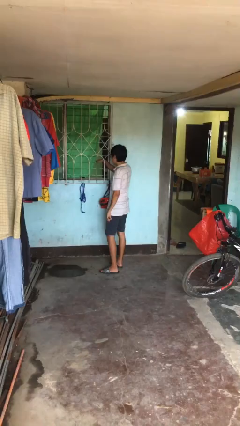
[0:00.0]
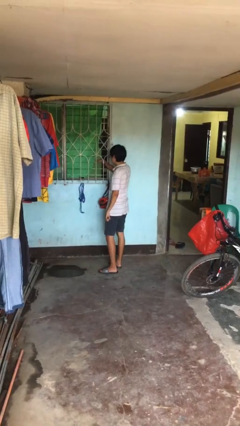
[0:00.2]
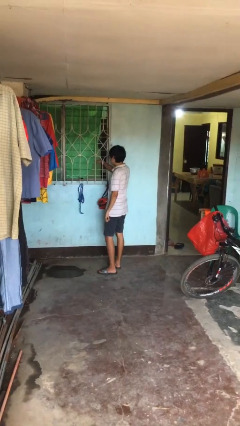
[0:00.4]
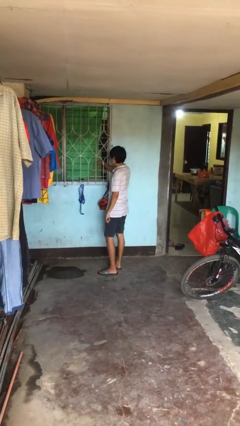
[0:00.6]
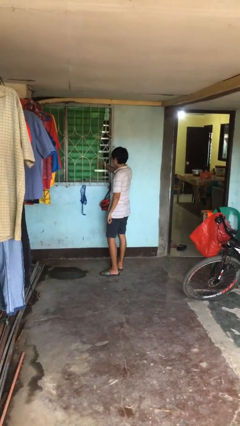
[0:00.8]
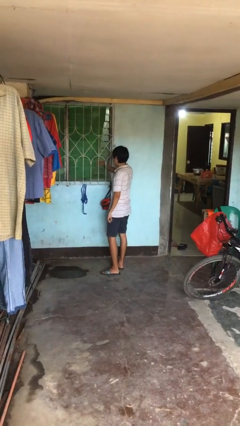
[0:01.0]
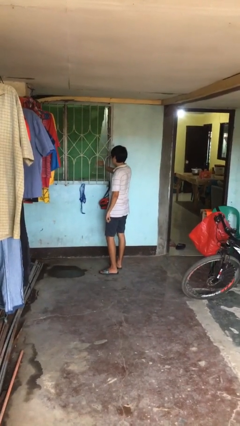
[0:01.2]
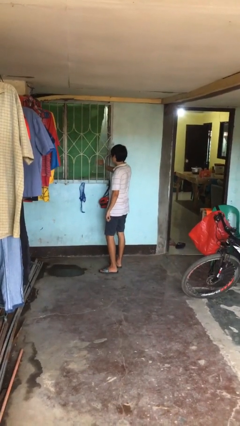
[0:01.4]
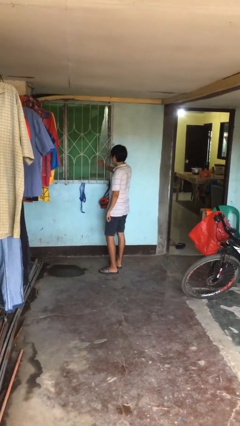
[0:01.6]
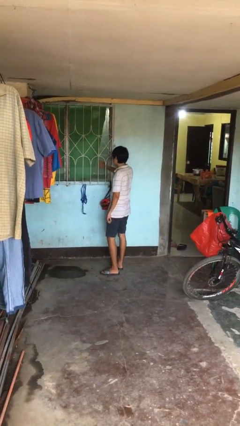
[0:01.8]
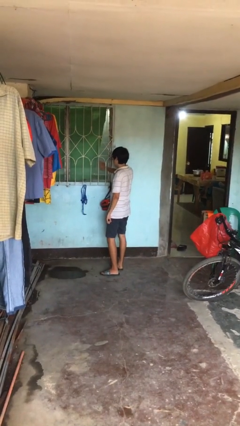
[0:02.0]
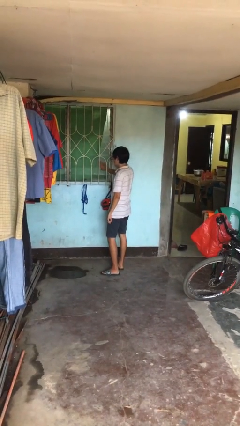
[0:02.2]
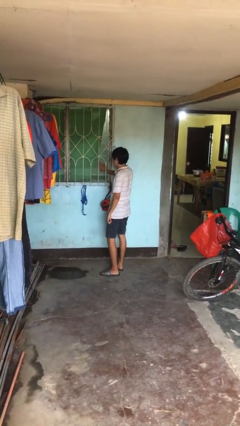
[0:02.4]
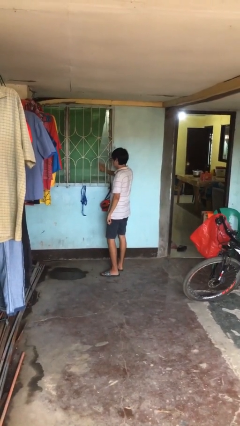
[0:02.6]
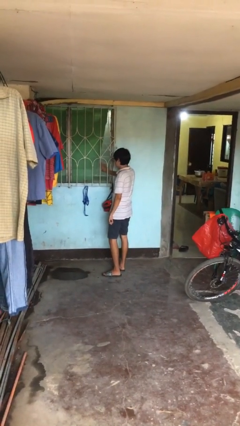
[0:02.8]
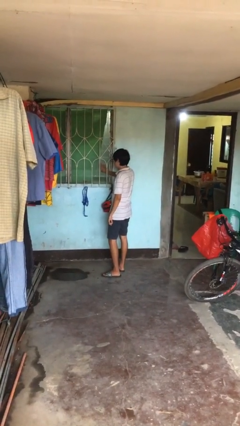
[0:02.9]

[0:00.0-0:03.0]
person closes home window

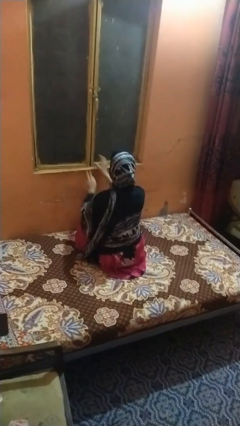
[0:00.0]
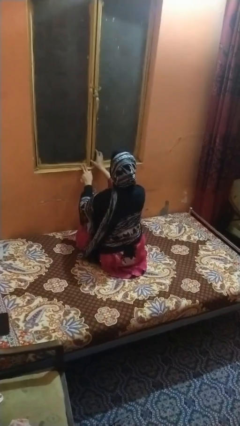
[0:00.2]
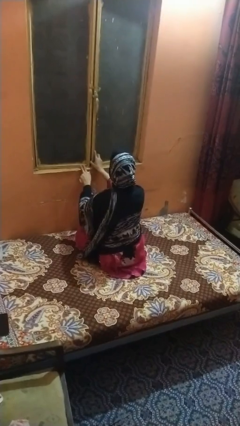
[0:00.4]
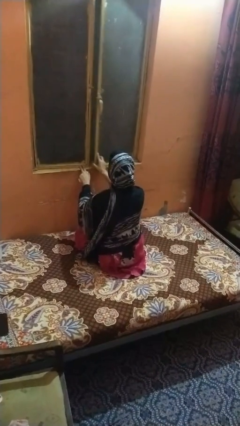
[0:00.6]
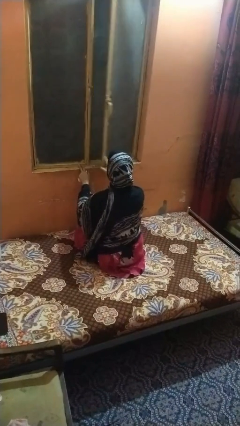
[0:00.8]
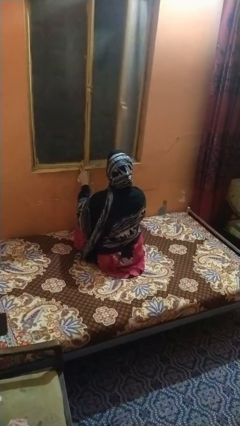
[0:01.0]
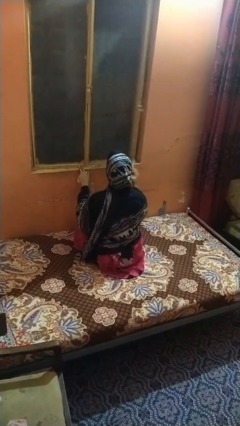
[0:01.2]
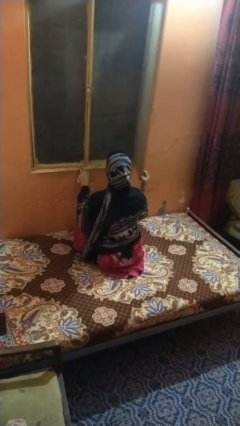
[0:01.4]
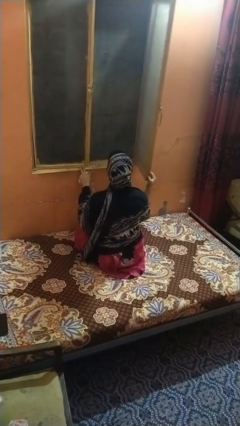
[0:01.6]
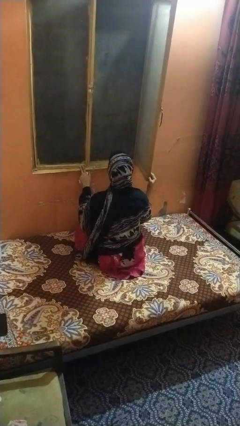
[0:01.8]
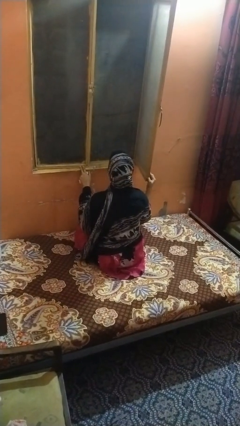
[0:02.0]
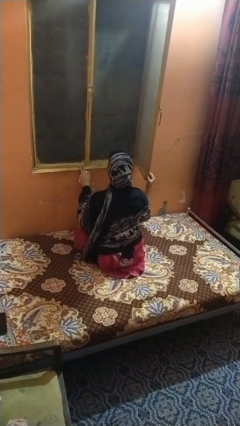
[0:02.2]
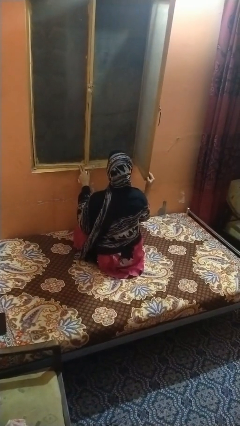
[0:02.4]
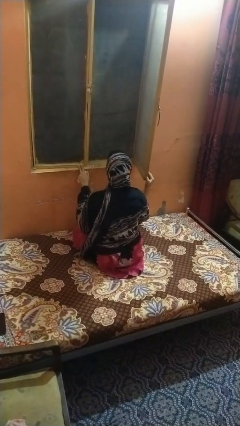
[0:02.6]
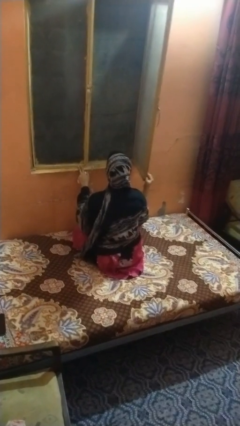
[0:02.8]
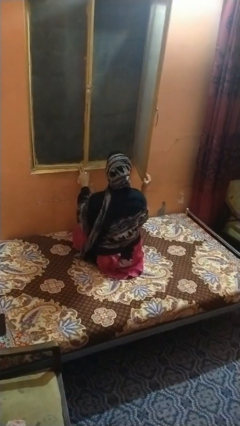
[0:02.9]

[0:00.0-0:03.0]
person opens home window

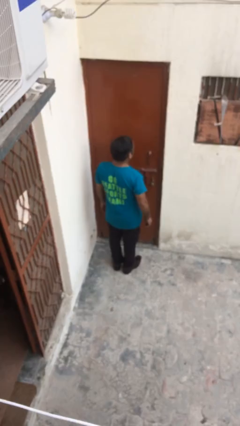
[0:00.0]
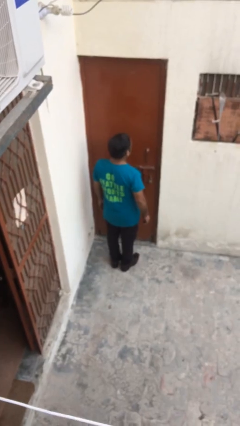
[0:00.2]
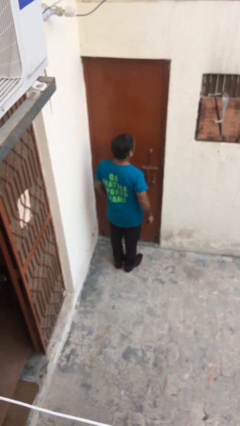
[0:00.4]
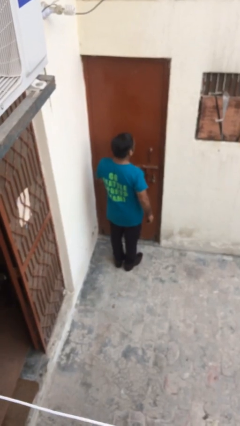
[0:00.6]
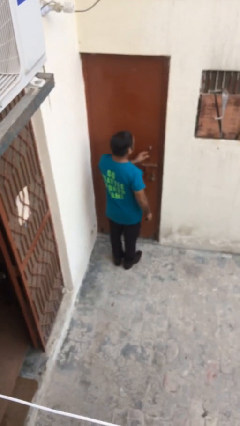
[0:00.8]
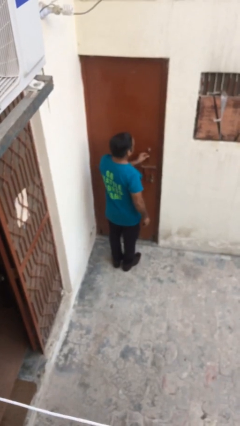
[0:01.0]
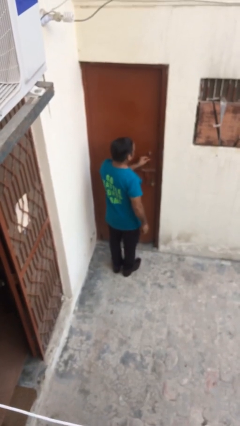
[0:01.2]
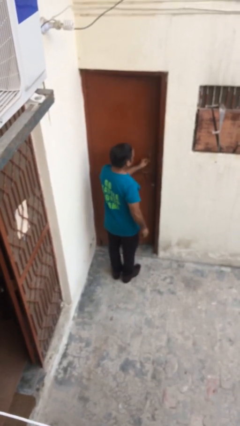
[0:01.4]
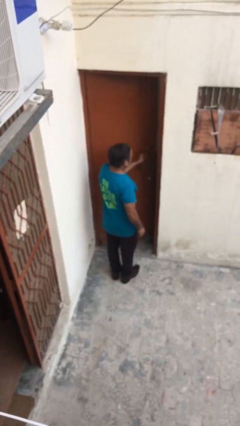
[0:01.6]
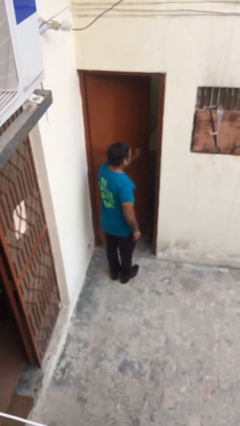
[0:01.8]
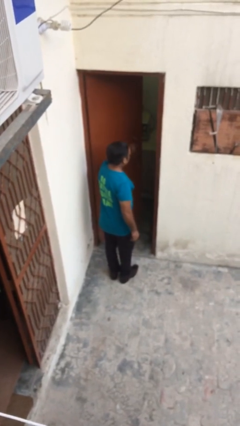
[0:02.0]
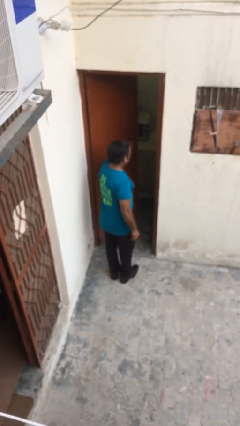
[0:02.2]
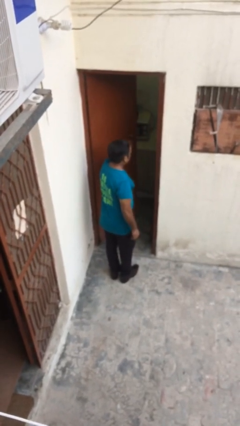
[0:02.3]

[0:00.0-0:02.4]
person opens facility door

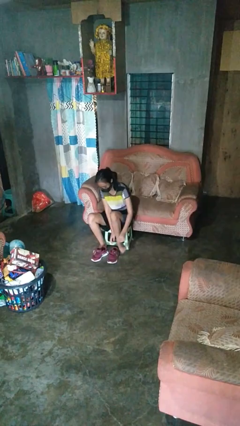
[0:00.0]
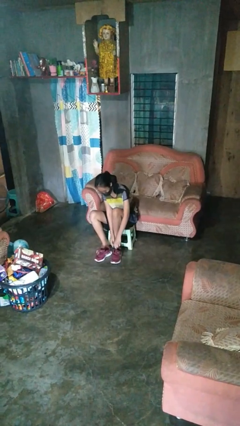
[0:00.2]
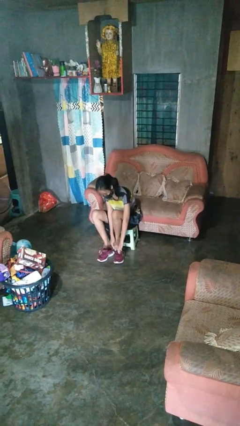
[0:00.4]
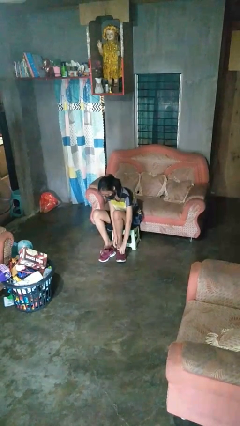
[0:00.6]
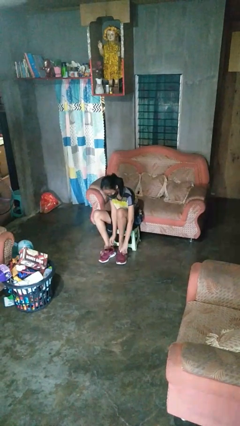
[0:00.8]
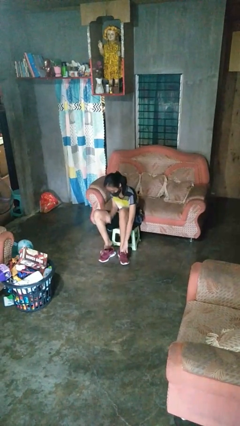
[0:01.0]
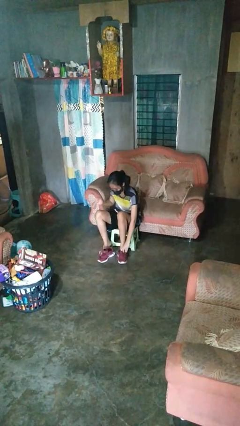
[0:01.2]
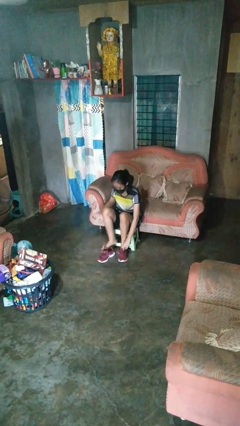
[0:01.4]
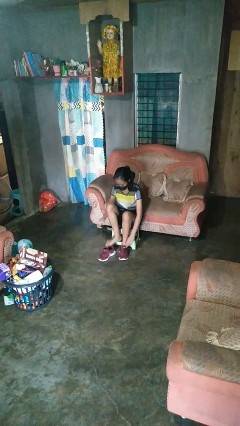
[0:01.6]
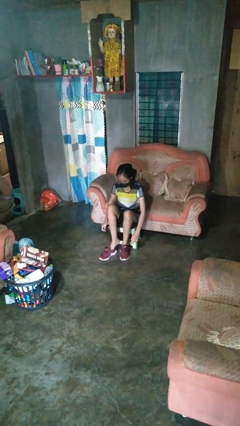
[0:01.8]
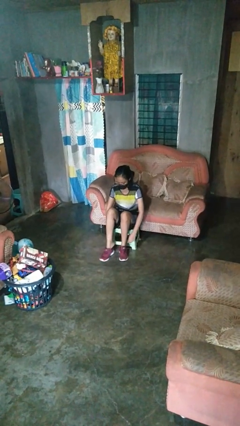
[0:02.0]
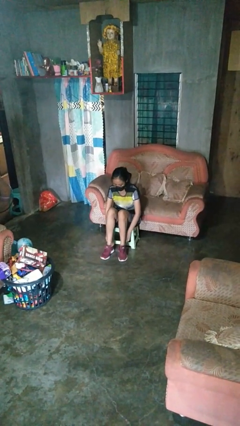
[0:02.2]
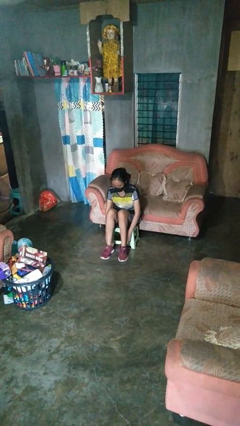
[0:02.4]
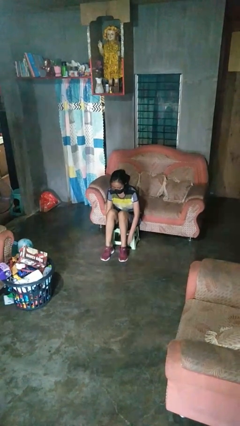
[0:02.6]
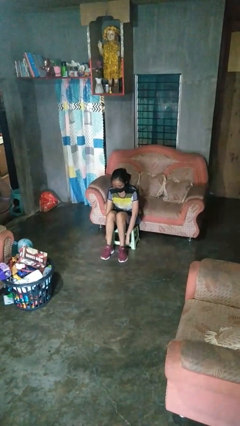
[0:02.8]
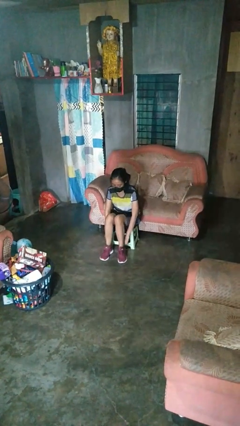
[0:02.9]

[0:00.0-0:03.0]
person puts on shoes

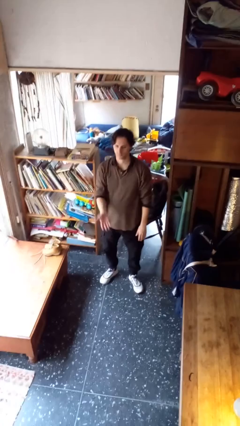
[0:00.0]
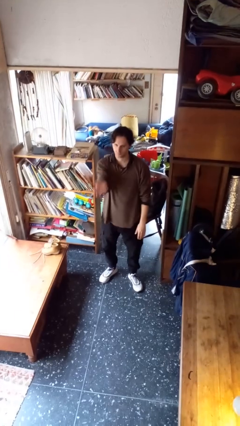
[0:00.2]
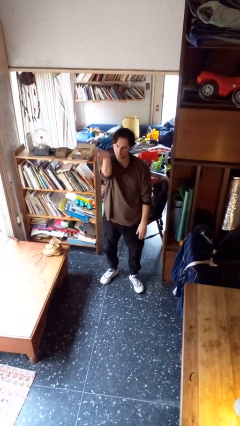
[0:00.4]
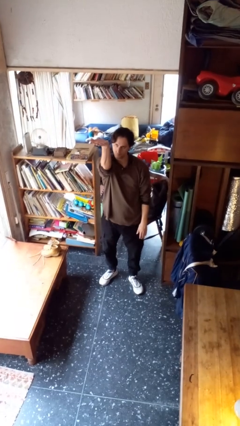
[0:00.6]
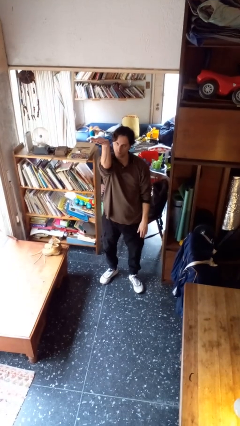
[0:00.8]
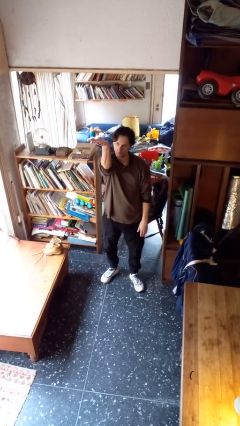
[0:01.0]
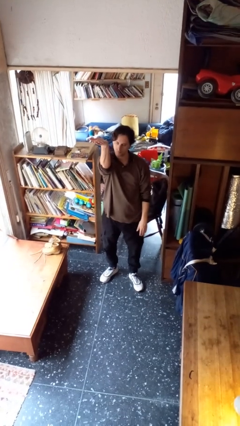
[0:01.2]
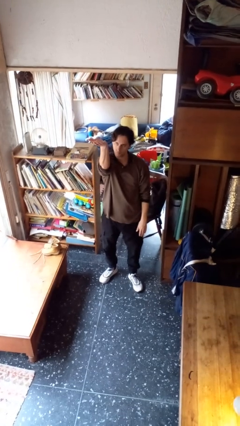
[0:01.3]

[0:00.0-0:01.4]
person gestures swipe up

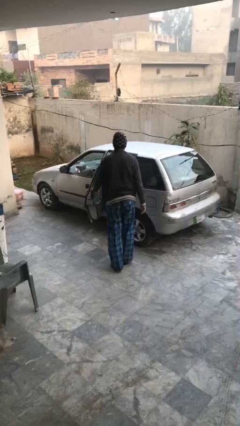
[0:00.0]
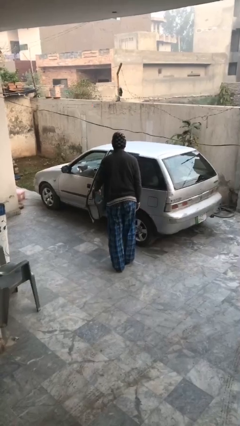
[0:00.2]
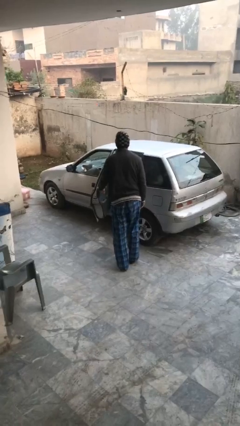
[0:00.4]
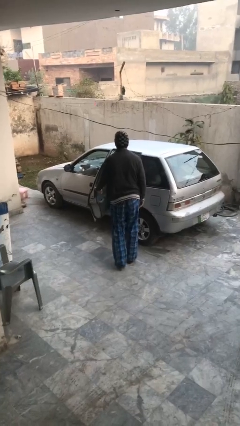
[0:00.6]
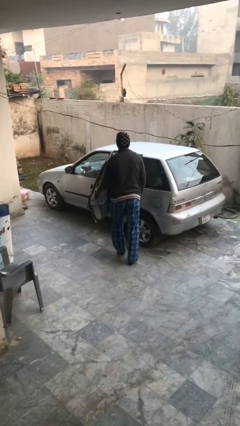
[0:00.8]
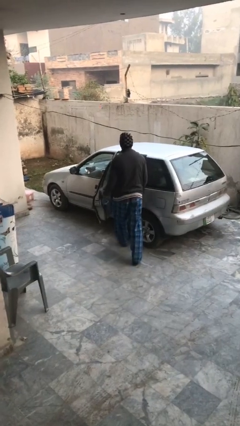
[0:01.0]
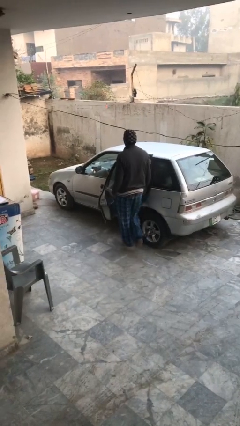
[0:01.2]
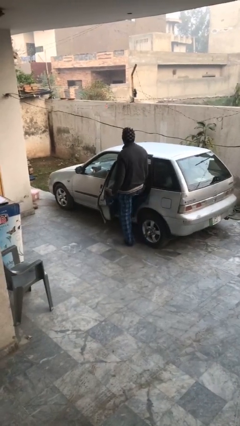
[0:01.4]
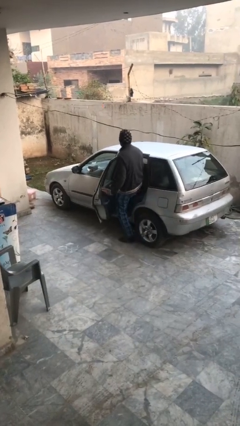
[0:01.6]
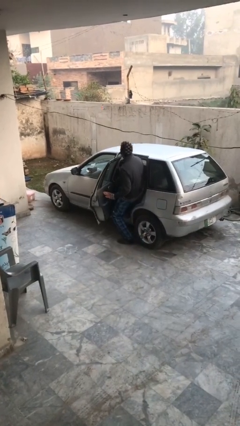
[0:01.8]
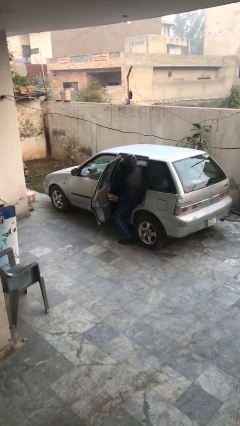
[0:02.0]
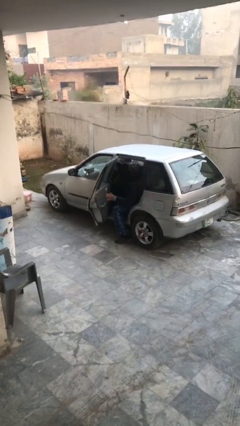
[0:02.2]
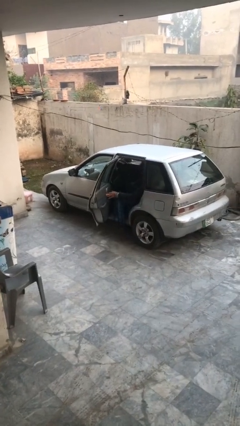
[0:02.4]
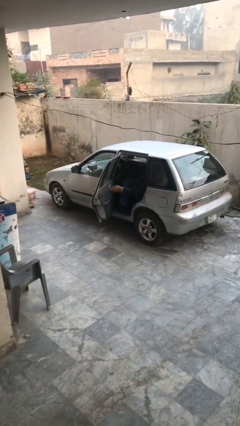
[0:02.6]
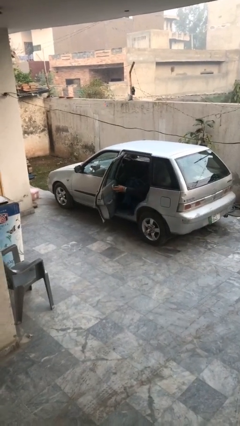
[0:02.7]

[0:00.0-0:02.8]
person enters car

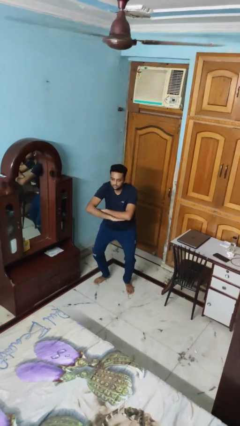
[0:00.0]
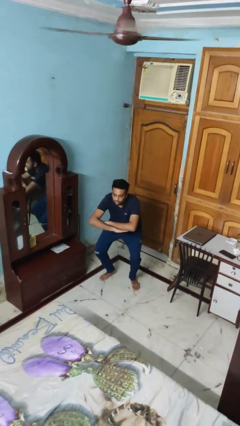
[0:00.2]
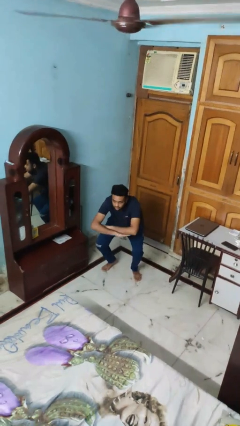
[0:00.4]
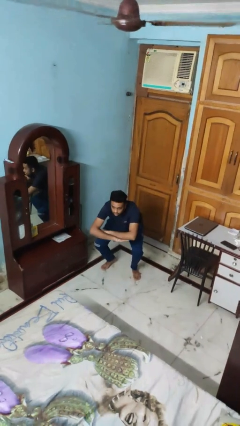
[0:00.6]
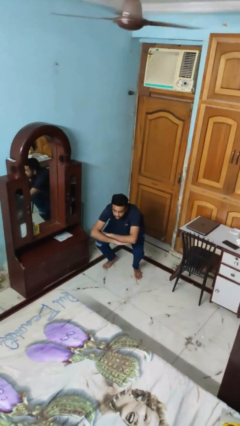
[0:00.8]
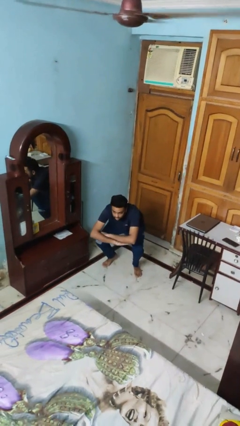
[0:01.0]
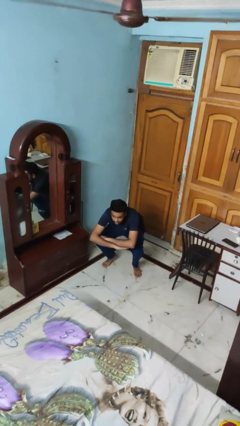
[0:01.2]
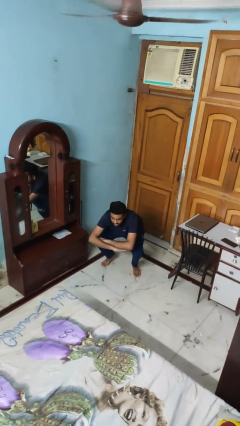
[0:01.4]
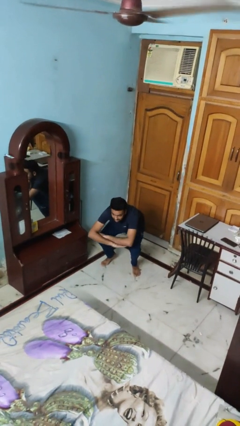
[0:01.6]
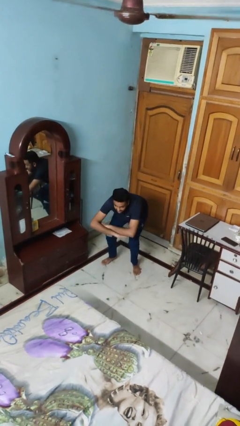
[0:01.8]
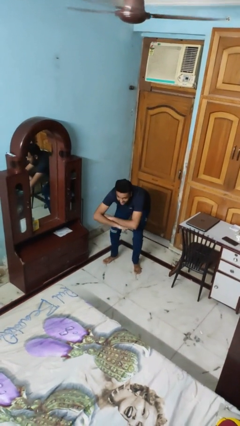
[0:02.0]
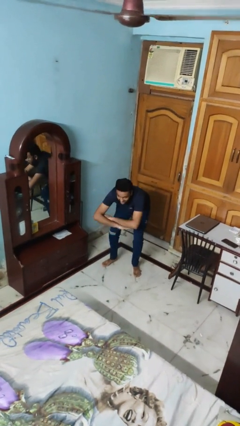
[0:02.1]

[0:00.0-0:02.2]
person squats
